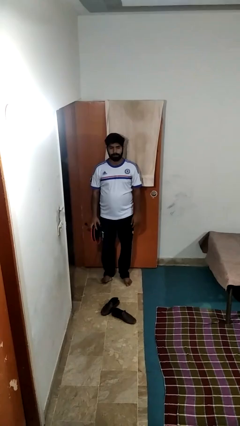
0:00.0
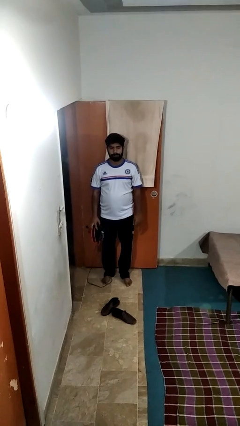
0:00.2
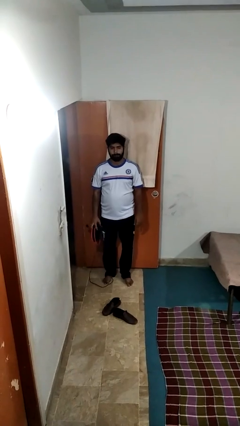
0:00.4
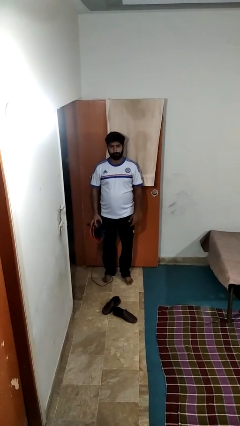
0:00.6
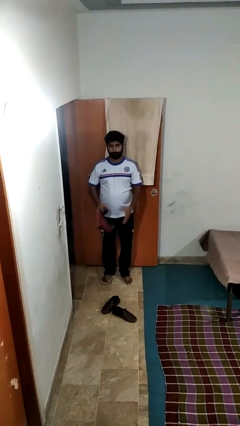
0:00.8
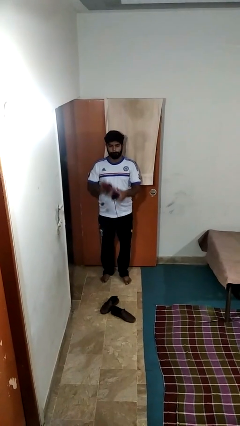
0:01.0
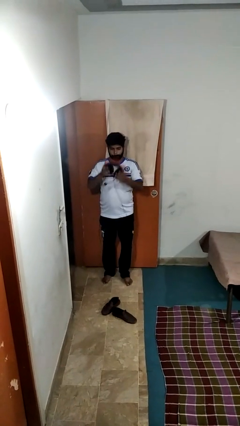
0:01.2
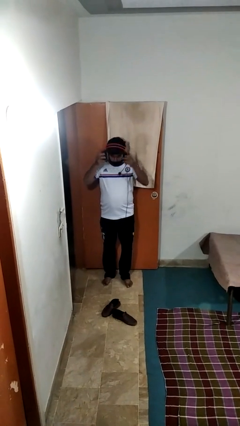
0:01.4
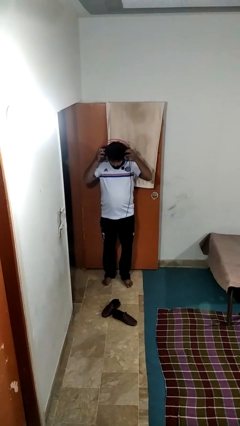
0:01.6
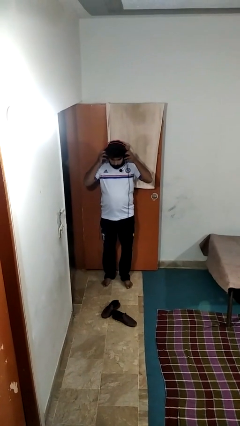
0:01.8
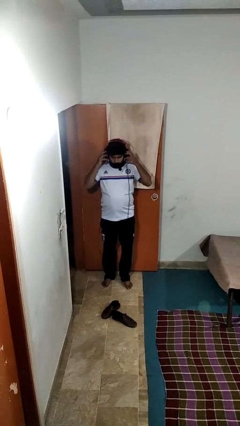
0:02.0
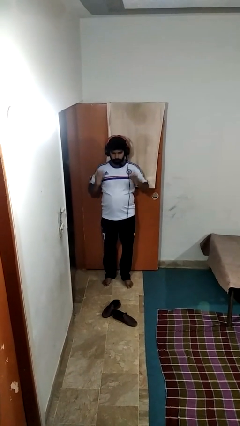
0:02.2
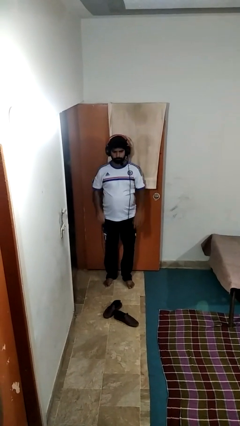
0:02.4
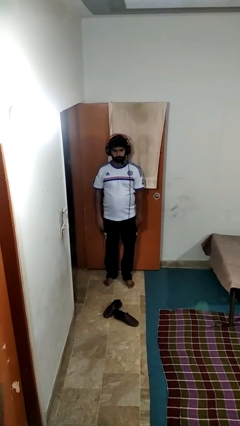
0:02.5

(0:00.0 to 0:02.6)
person puts on headphones

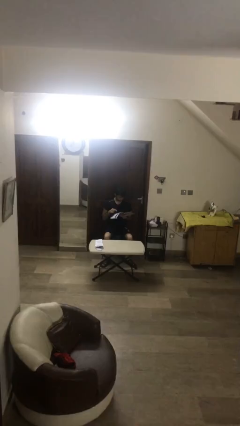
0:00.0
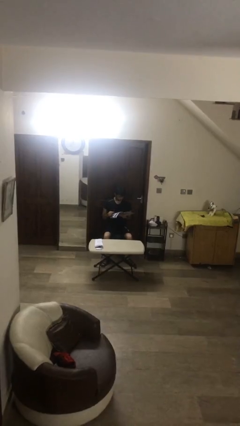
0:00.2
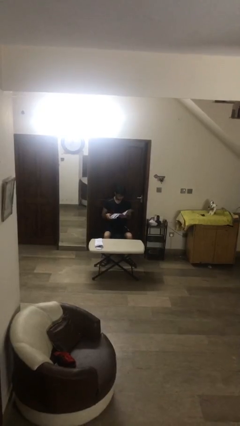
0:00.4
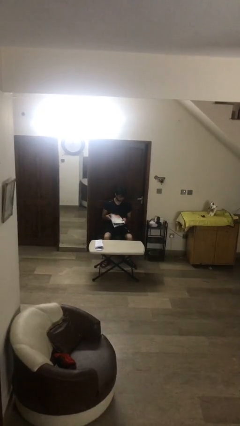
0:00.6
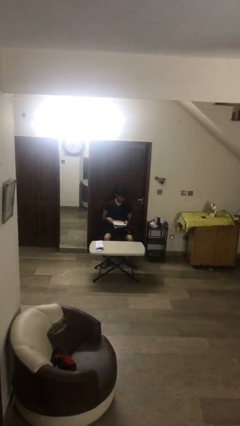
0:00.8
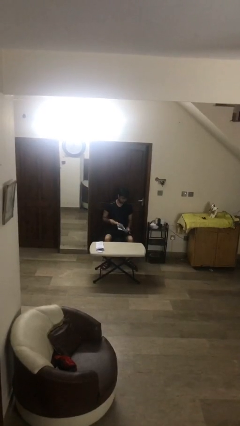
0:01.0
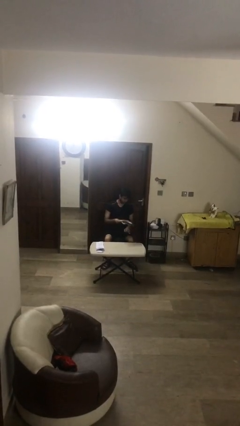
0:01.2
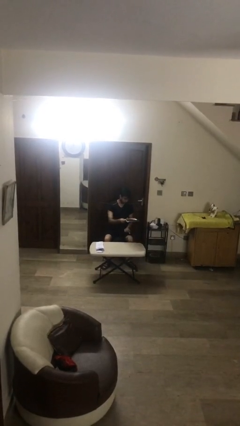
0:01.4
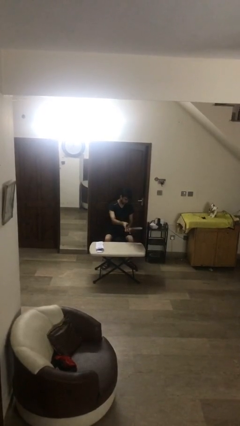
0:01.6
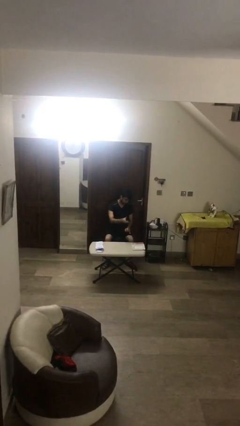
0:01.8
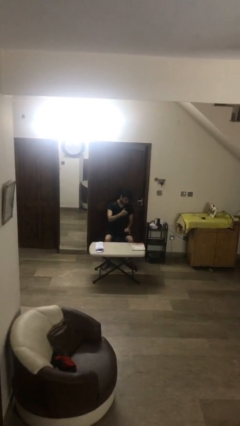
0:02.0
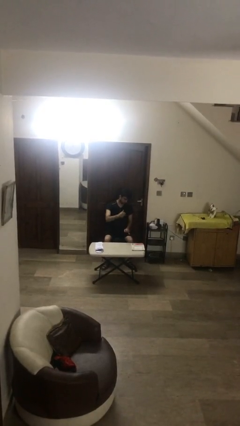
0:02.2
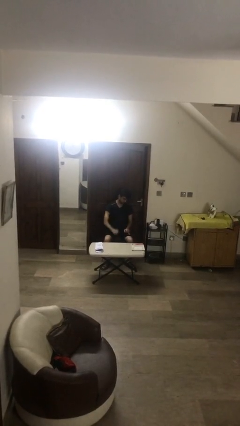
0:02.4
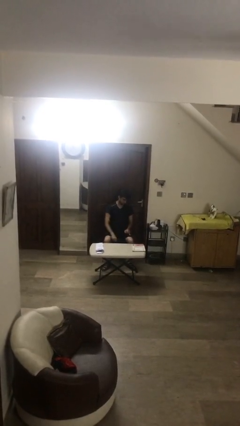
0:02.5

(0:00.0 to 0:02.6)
person puts down object on table

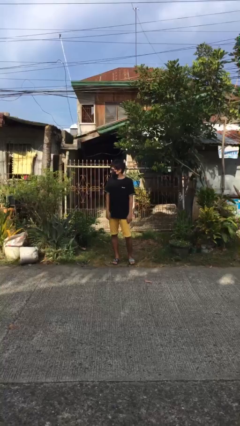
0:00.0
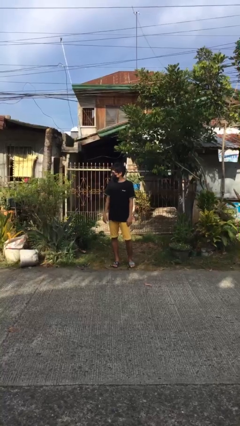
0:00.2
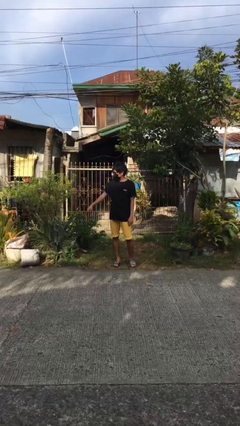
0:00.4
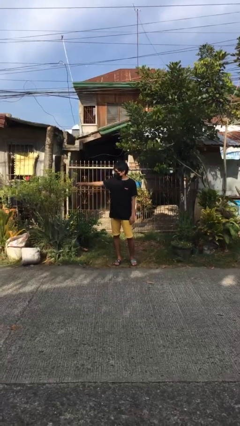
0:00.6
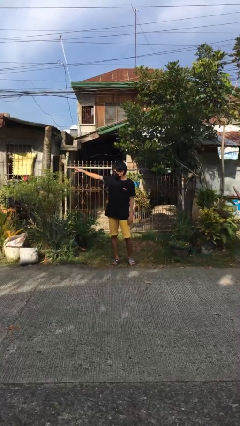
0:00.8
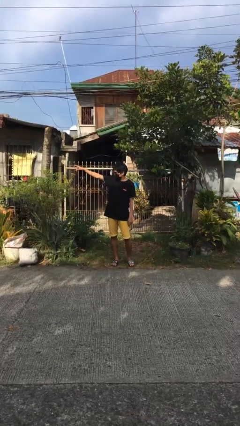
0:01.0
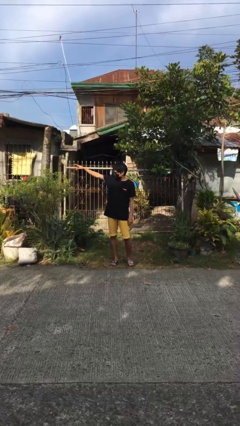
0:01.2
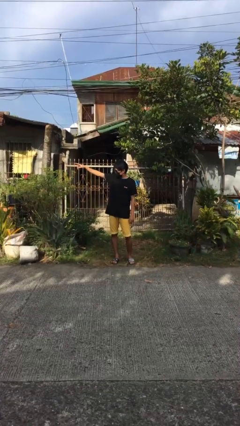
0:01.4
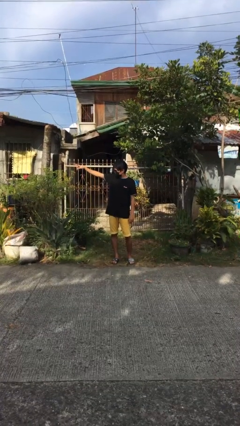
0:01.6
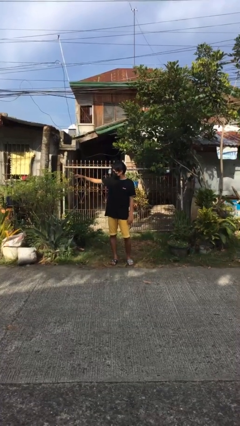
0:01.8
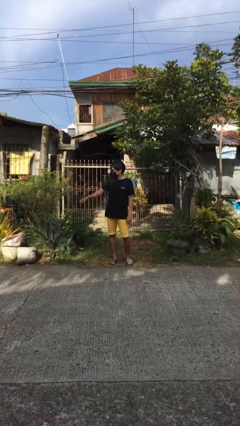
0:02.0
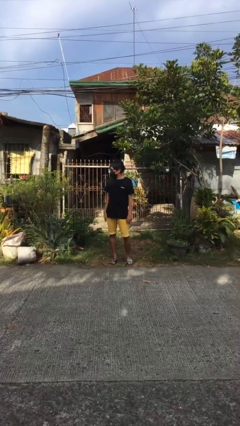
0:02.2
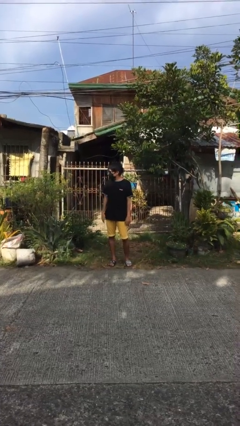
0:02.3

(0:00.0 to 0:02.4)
person points at person

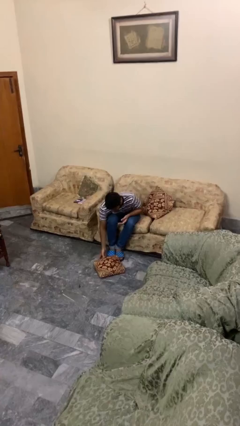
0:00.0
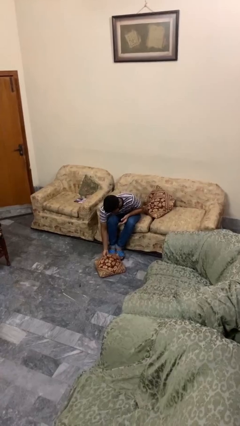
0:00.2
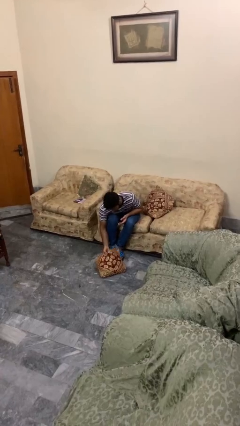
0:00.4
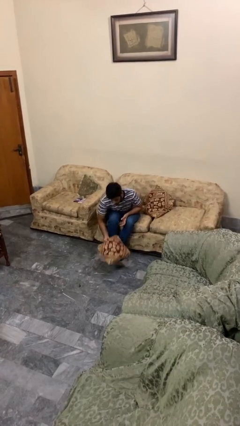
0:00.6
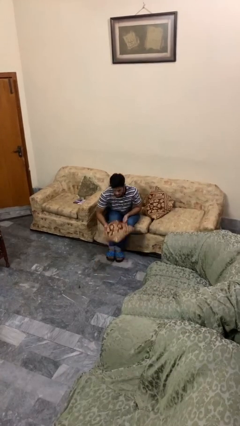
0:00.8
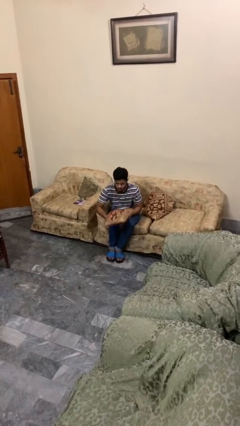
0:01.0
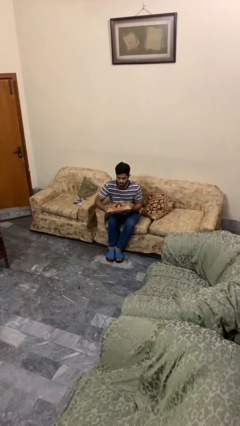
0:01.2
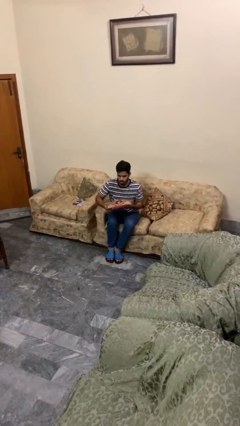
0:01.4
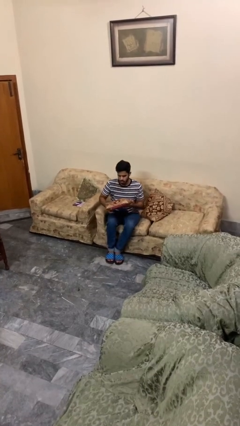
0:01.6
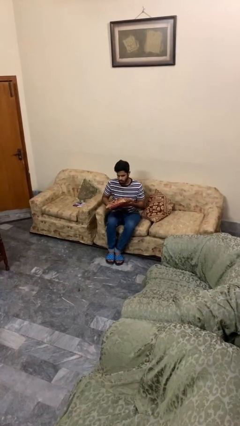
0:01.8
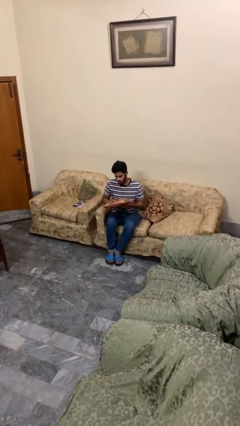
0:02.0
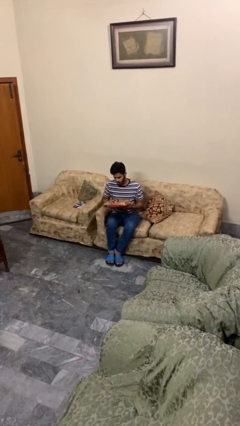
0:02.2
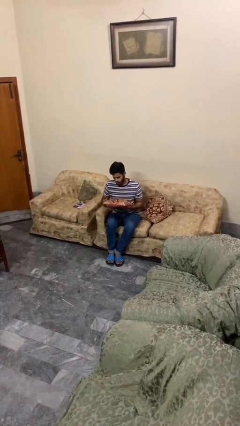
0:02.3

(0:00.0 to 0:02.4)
person picks up object from floor

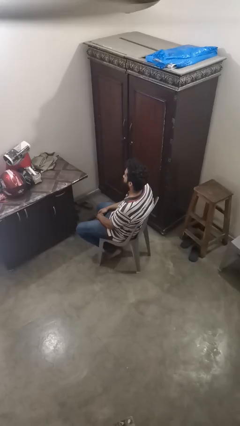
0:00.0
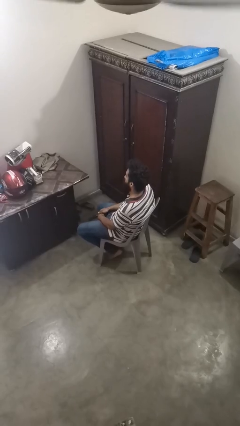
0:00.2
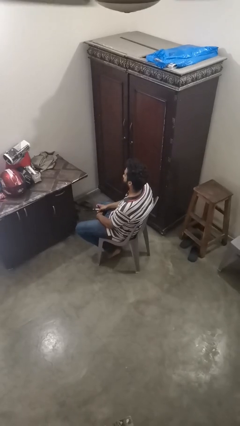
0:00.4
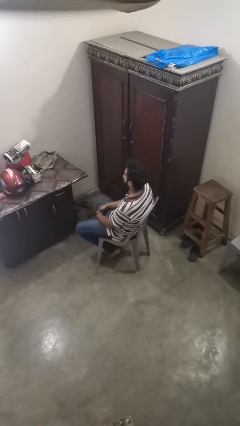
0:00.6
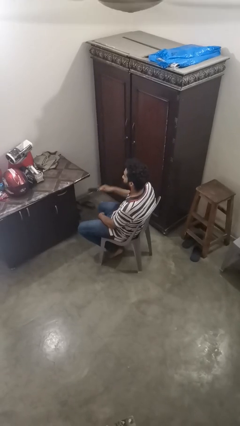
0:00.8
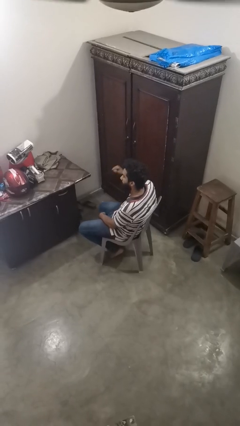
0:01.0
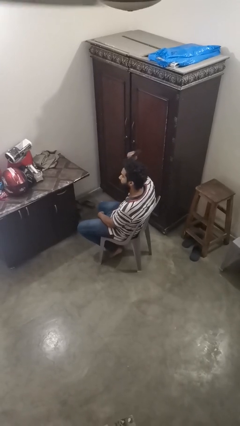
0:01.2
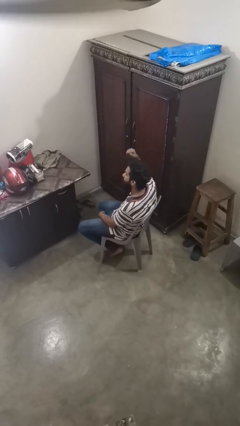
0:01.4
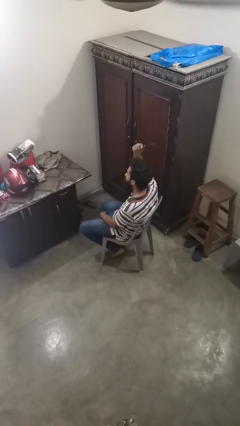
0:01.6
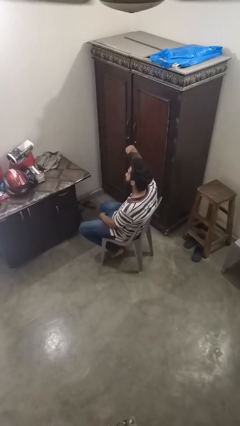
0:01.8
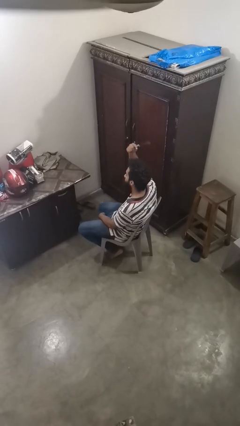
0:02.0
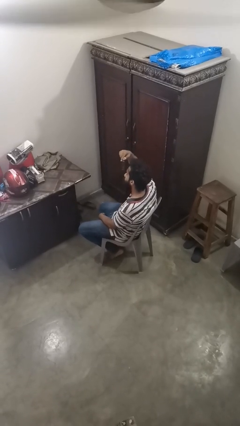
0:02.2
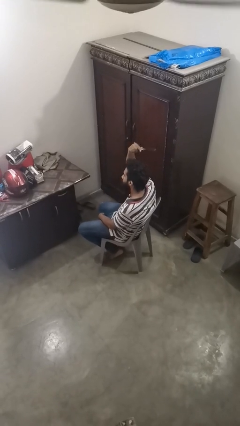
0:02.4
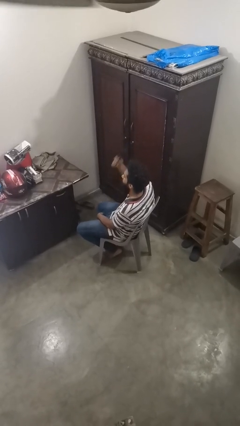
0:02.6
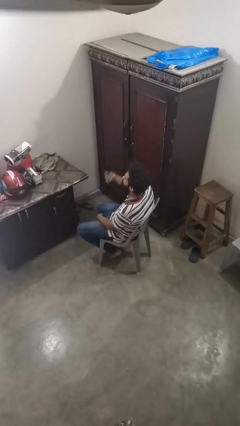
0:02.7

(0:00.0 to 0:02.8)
person brushes hair

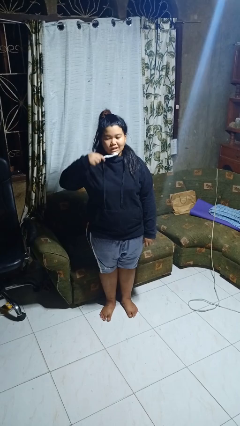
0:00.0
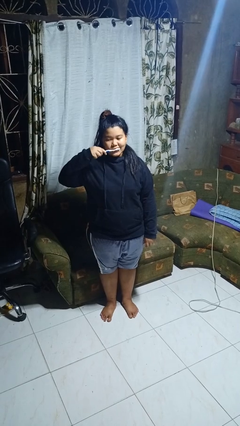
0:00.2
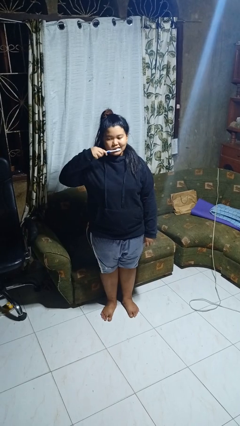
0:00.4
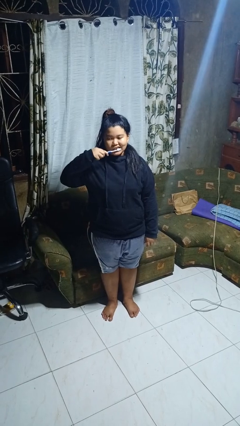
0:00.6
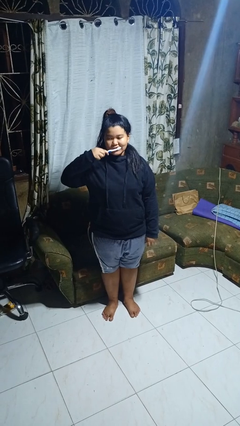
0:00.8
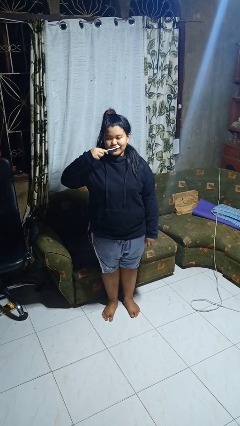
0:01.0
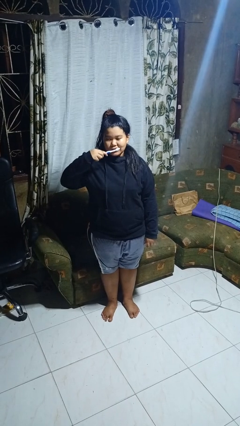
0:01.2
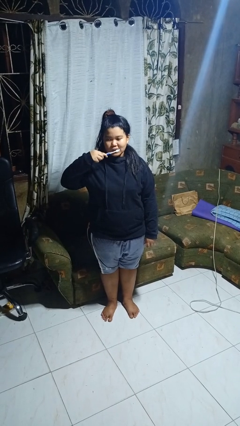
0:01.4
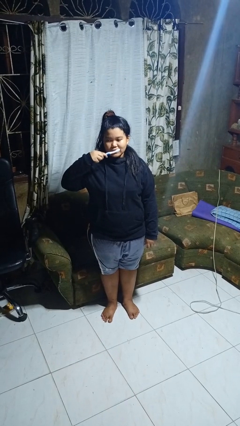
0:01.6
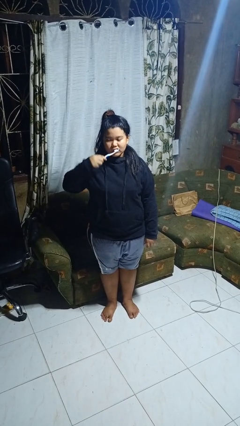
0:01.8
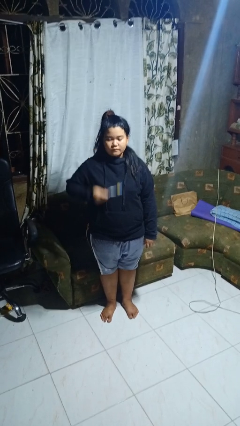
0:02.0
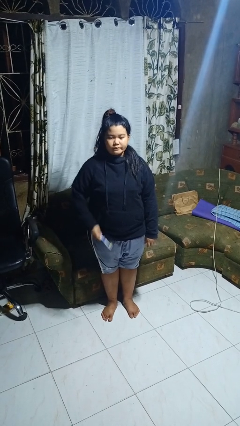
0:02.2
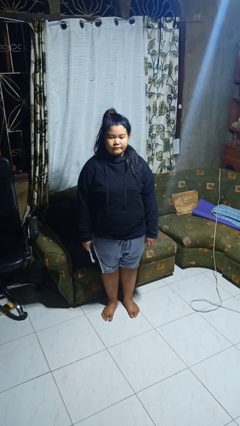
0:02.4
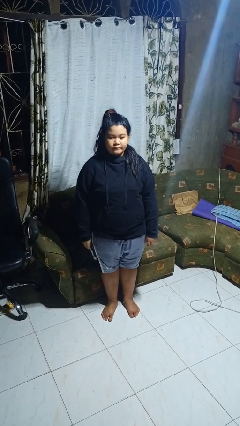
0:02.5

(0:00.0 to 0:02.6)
person brushes teeth

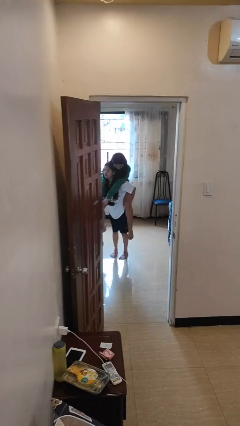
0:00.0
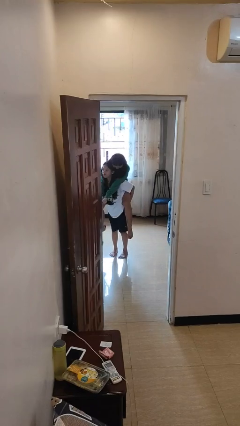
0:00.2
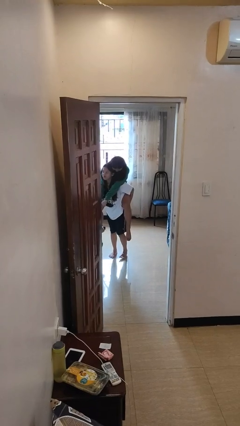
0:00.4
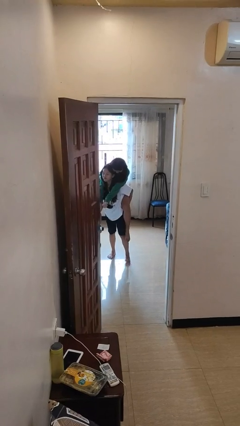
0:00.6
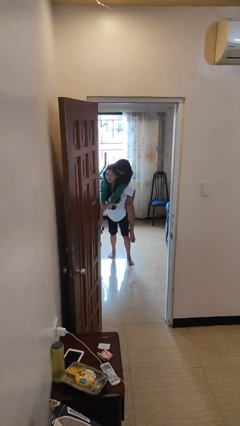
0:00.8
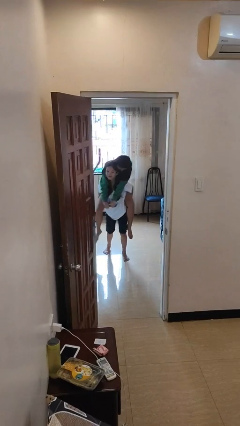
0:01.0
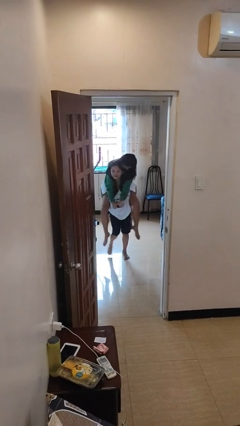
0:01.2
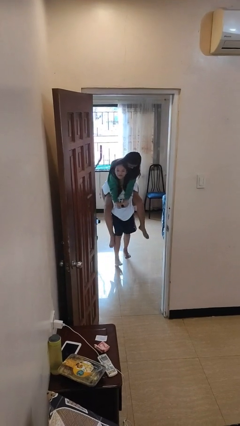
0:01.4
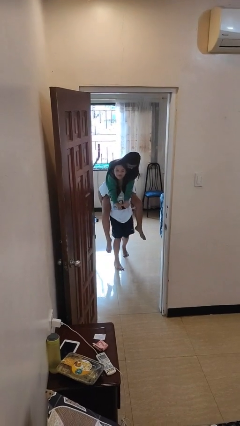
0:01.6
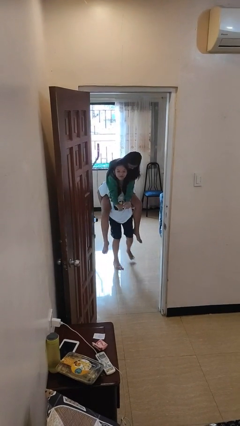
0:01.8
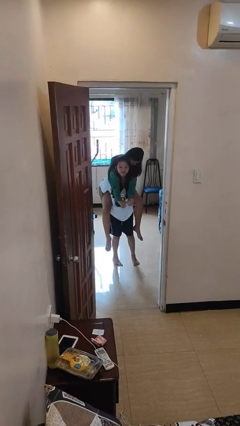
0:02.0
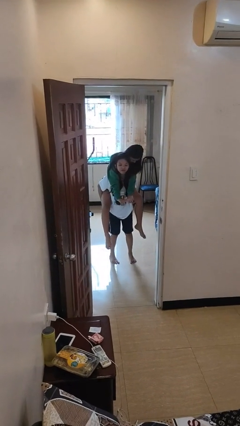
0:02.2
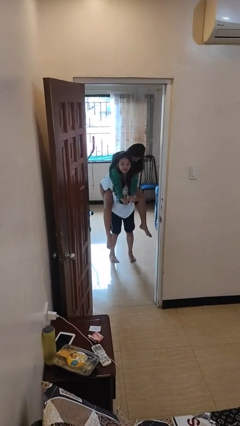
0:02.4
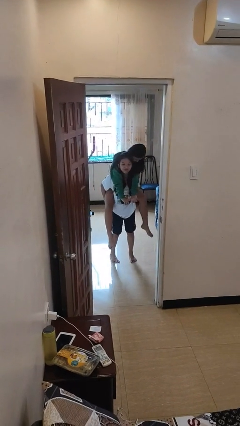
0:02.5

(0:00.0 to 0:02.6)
person carries person on back
